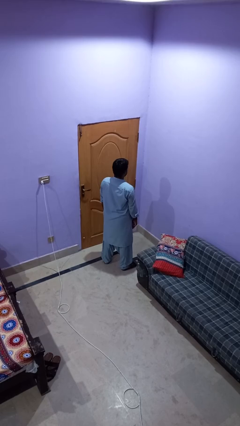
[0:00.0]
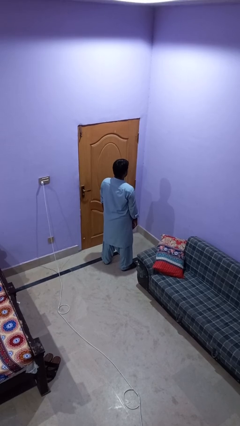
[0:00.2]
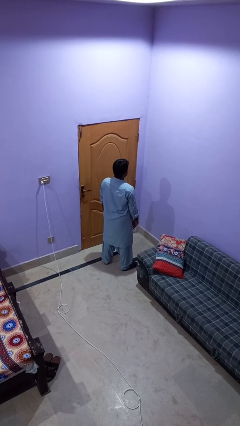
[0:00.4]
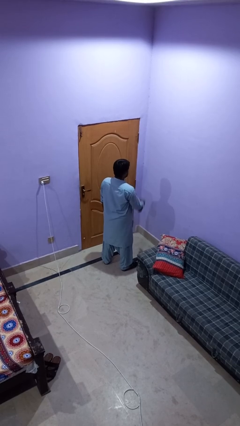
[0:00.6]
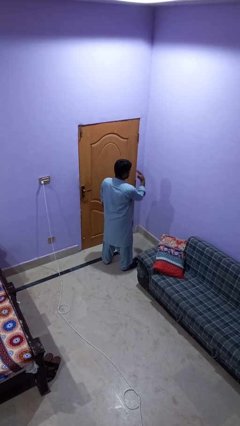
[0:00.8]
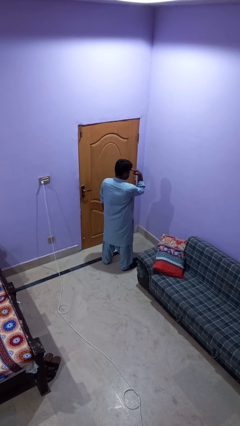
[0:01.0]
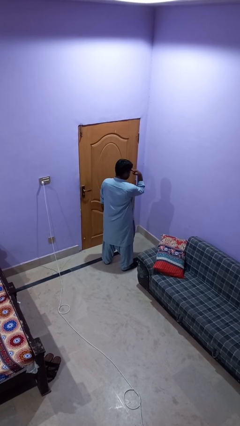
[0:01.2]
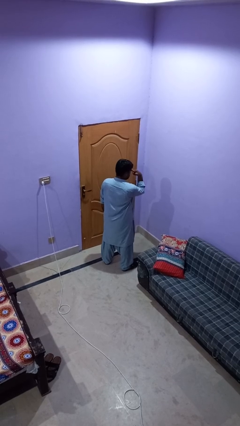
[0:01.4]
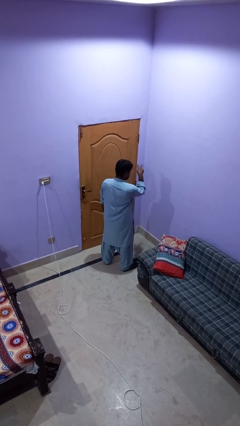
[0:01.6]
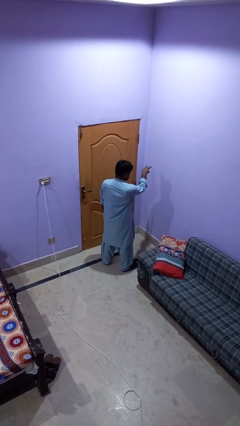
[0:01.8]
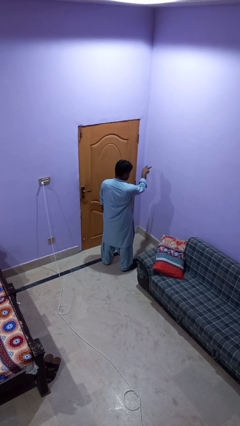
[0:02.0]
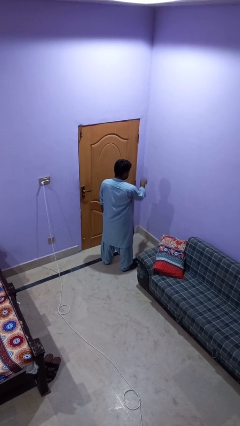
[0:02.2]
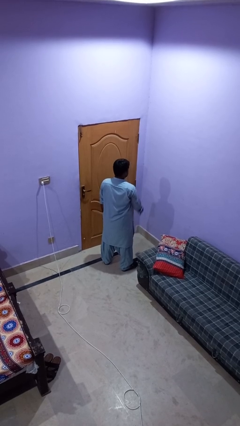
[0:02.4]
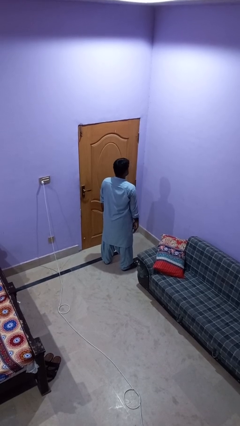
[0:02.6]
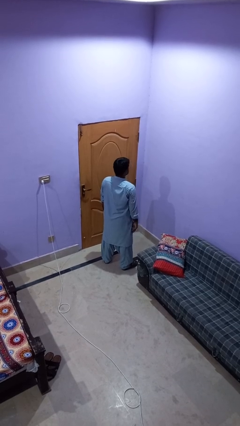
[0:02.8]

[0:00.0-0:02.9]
person gestures watch closely

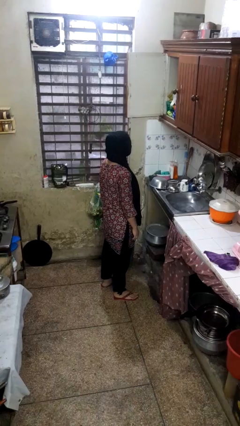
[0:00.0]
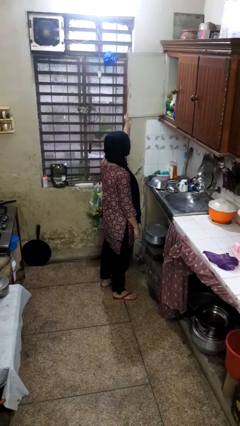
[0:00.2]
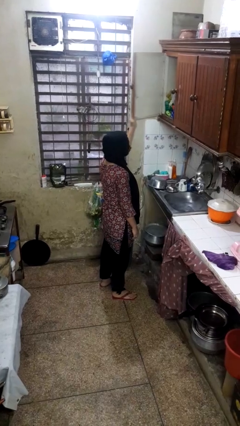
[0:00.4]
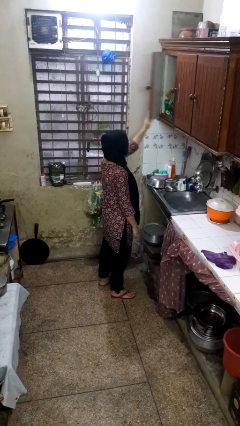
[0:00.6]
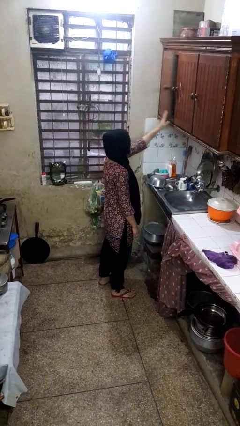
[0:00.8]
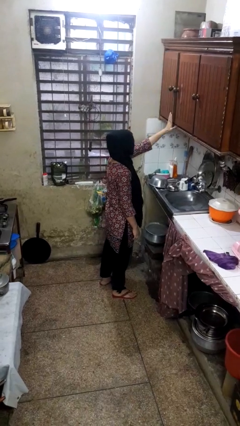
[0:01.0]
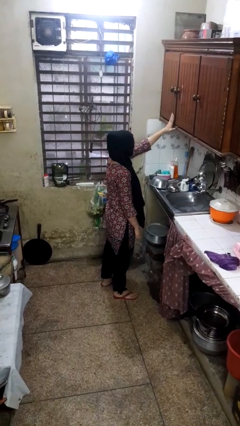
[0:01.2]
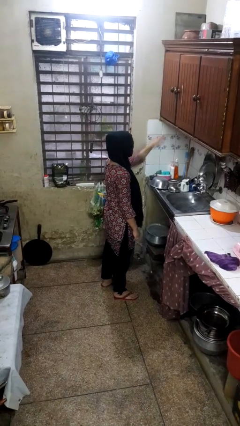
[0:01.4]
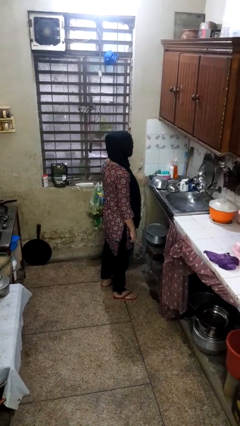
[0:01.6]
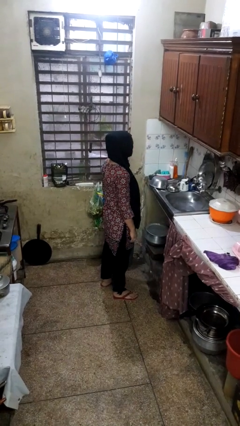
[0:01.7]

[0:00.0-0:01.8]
person closes cabinet

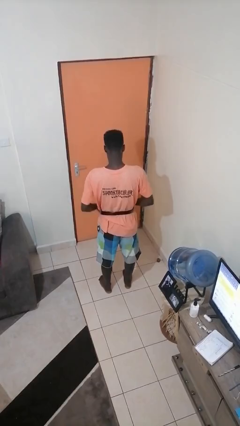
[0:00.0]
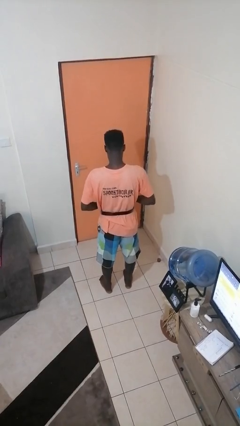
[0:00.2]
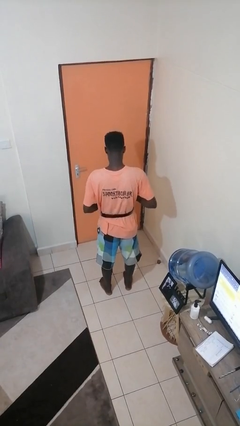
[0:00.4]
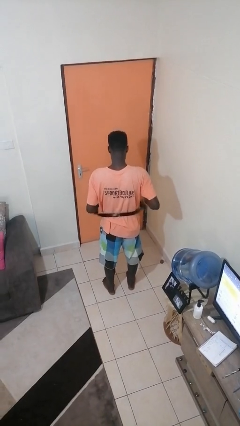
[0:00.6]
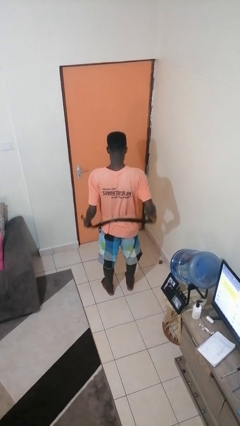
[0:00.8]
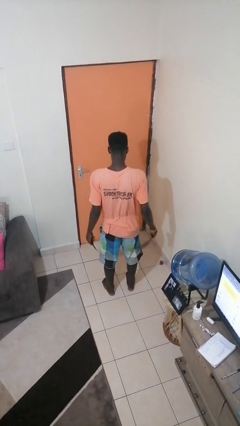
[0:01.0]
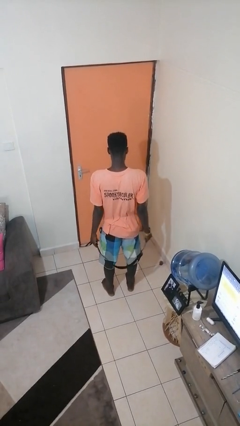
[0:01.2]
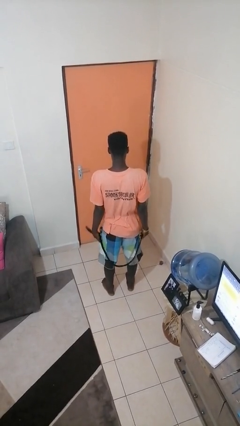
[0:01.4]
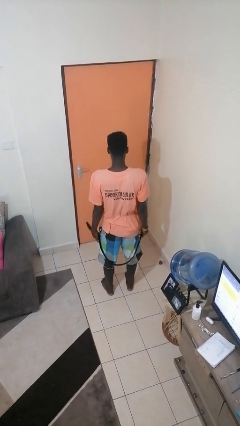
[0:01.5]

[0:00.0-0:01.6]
person takes off belt

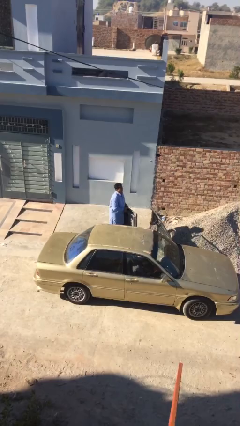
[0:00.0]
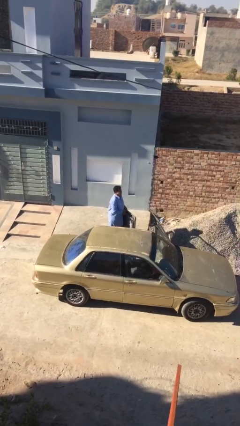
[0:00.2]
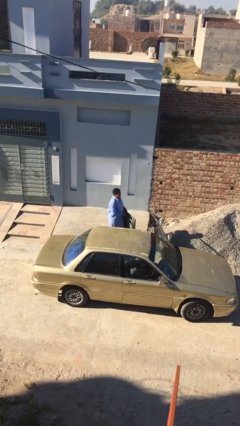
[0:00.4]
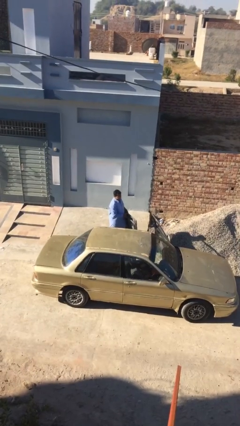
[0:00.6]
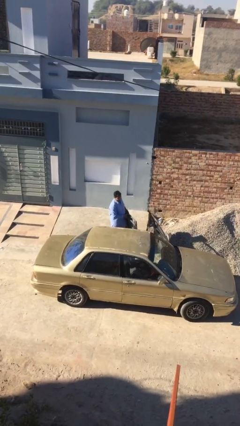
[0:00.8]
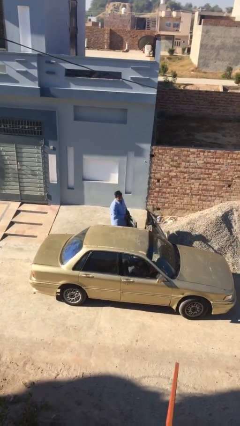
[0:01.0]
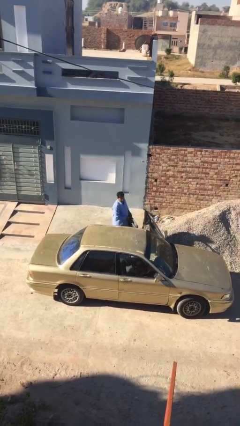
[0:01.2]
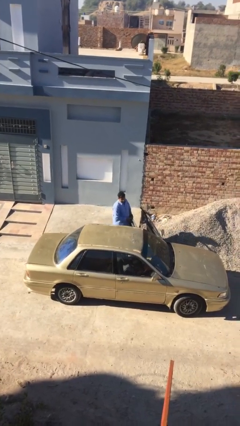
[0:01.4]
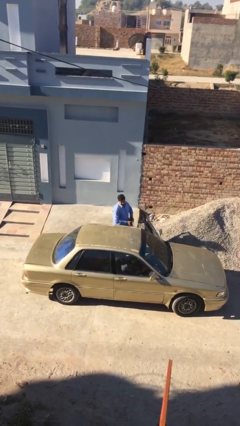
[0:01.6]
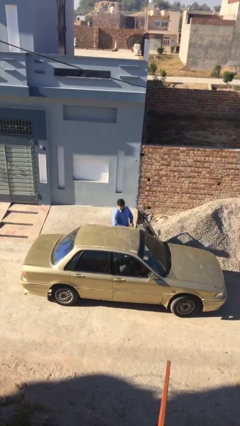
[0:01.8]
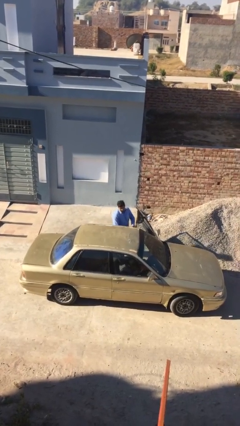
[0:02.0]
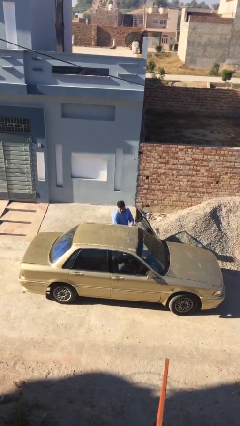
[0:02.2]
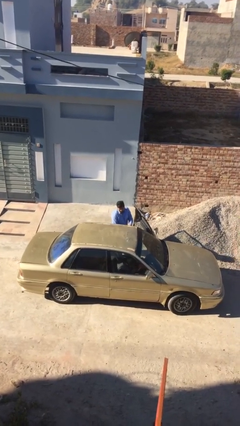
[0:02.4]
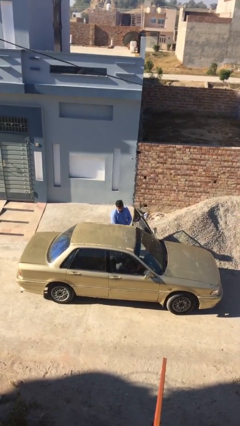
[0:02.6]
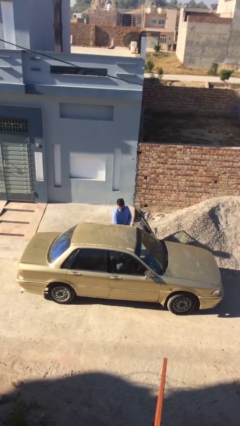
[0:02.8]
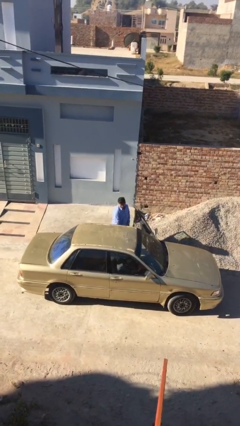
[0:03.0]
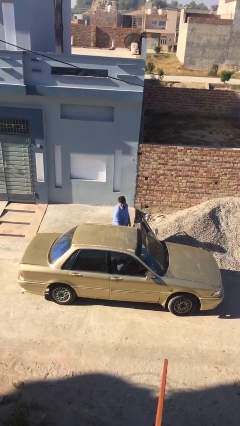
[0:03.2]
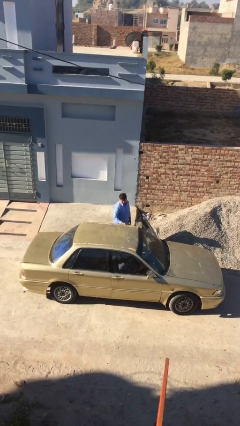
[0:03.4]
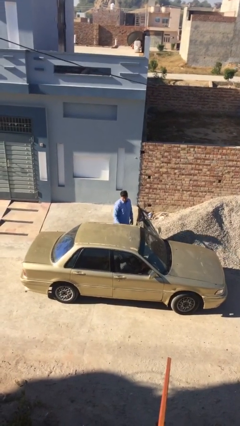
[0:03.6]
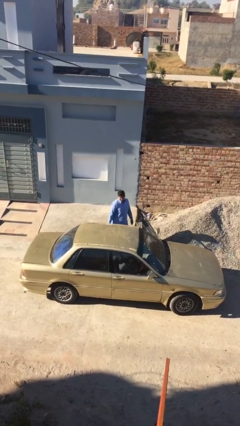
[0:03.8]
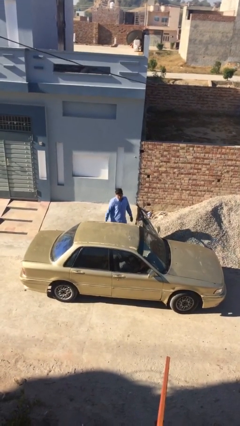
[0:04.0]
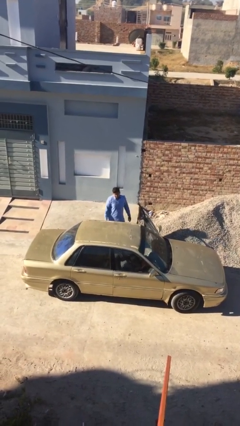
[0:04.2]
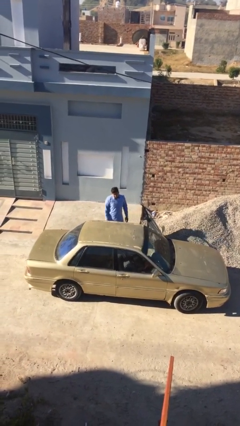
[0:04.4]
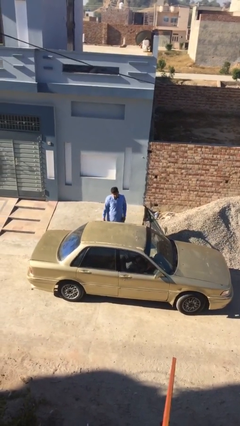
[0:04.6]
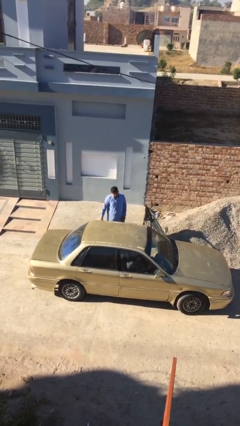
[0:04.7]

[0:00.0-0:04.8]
person loads car

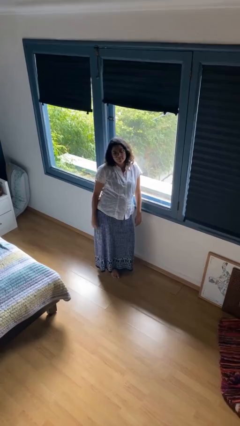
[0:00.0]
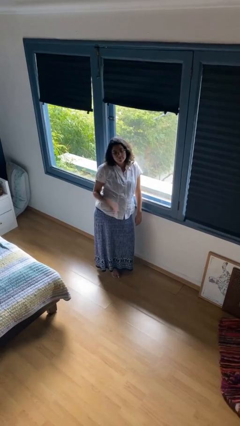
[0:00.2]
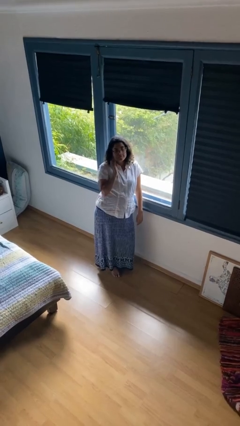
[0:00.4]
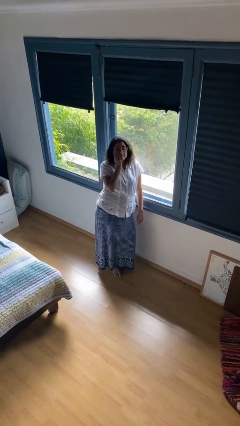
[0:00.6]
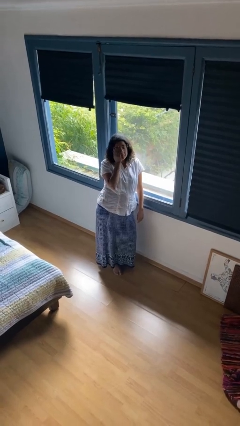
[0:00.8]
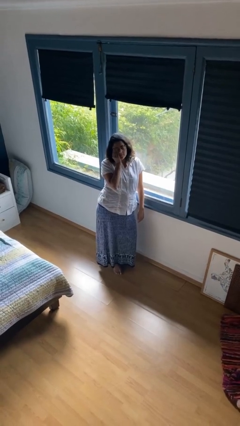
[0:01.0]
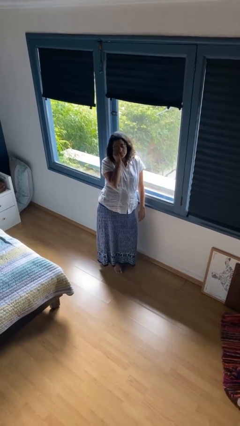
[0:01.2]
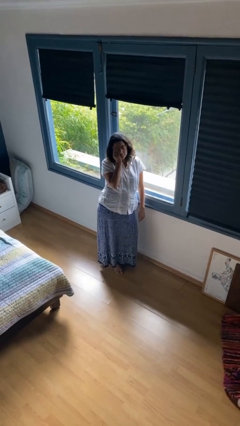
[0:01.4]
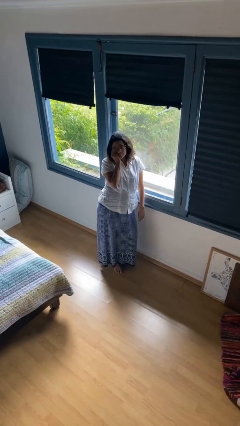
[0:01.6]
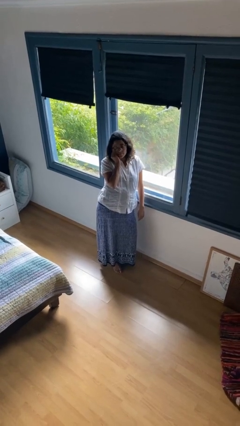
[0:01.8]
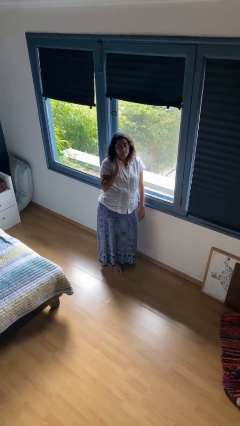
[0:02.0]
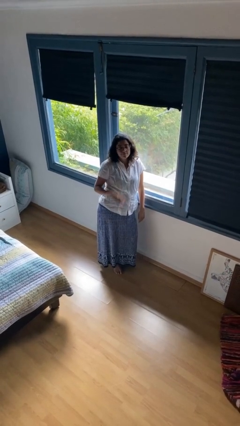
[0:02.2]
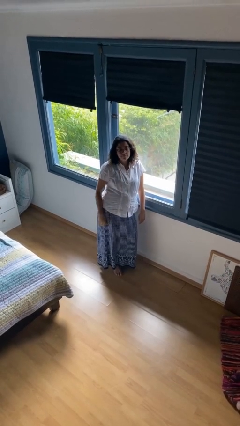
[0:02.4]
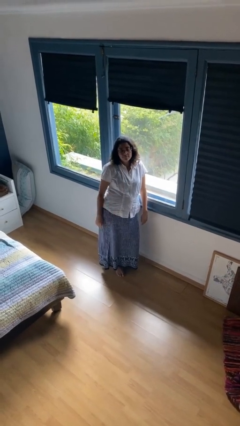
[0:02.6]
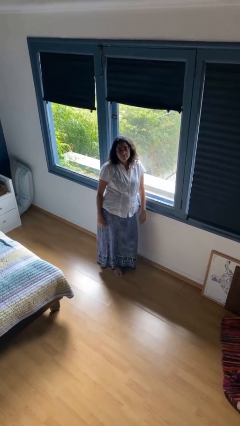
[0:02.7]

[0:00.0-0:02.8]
person rubs eyes

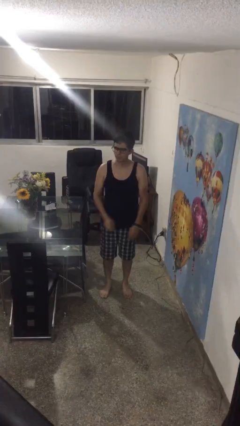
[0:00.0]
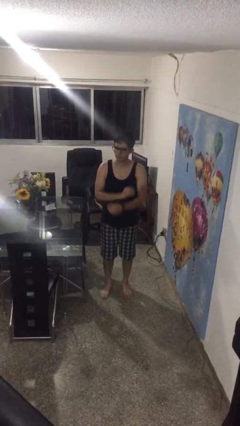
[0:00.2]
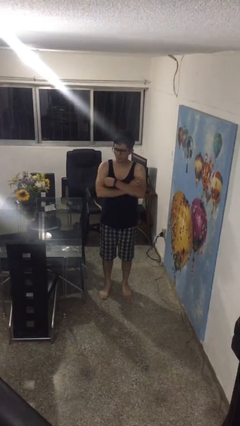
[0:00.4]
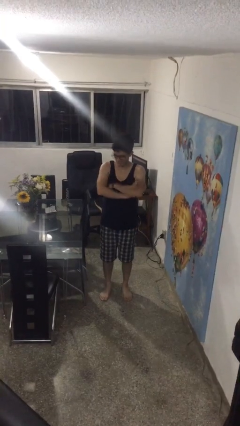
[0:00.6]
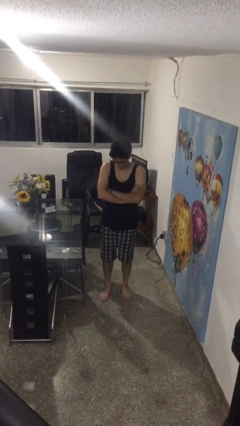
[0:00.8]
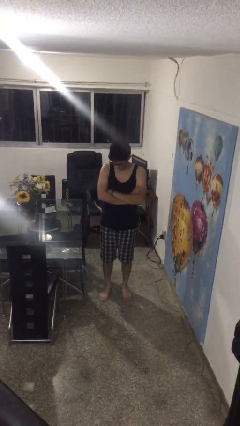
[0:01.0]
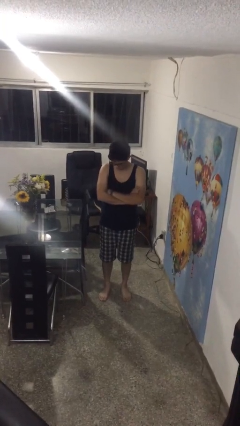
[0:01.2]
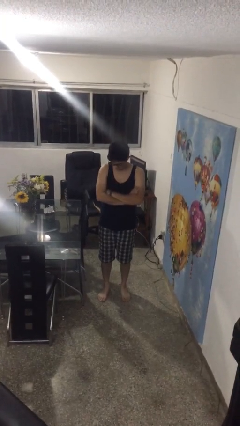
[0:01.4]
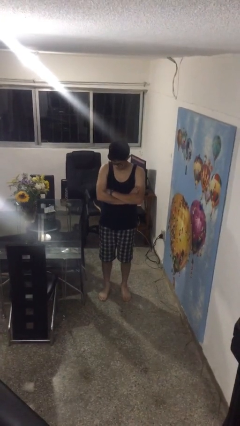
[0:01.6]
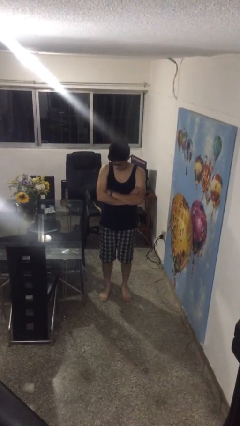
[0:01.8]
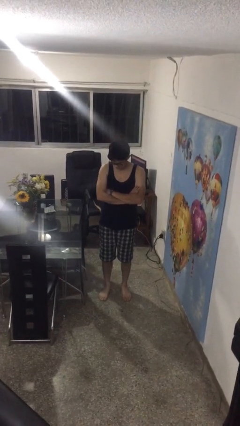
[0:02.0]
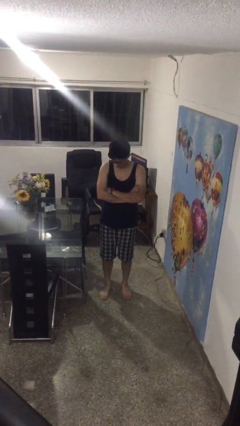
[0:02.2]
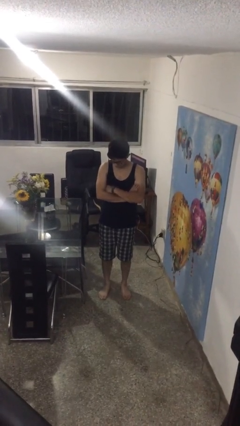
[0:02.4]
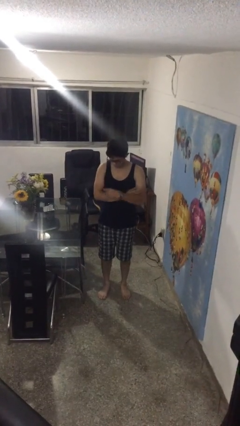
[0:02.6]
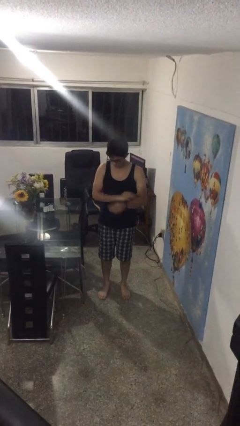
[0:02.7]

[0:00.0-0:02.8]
person crosses arms

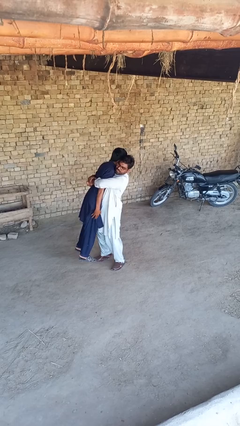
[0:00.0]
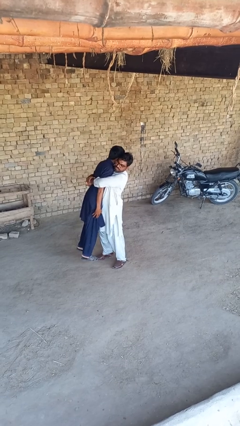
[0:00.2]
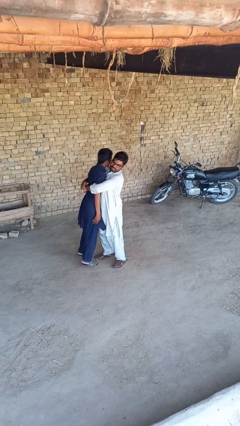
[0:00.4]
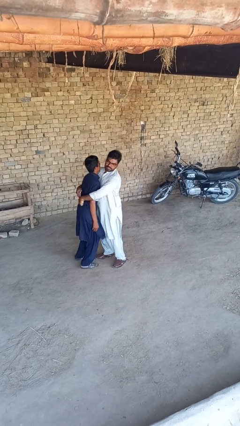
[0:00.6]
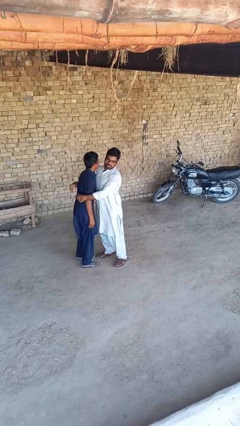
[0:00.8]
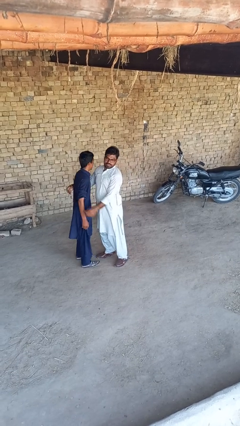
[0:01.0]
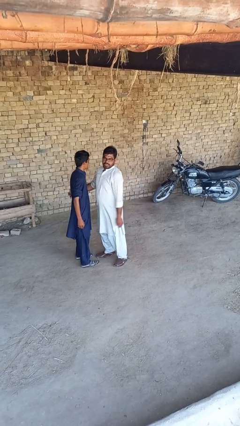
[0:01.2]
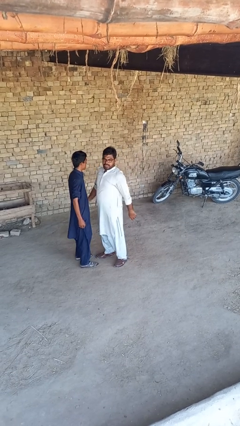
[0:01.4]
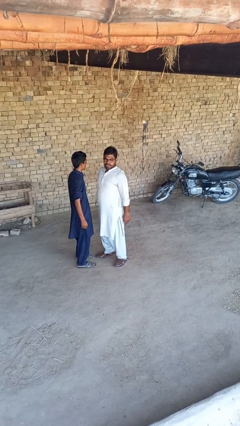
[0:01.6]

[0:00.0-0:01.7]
person puts down person
